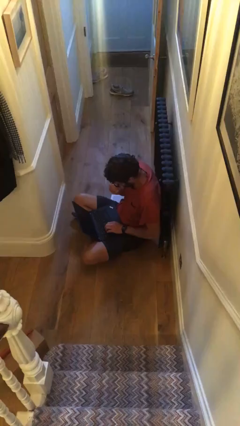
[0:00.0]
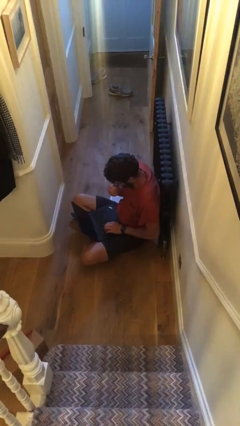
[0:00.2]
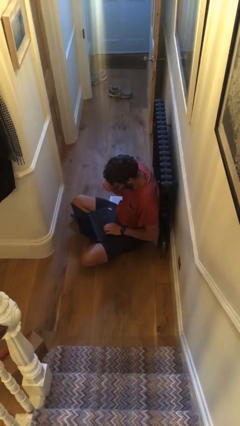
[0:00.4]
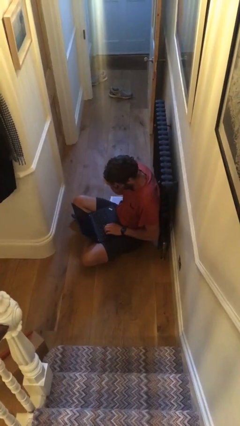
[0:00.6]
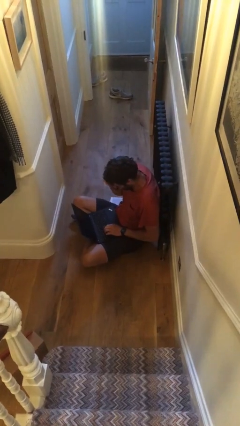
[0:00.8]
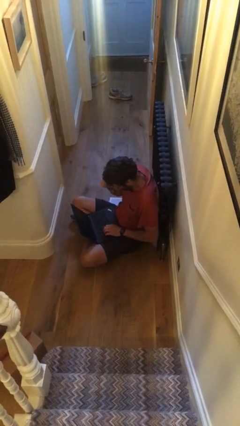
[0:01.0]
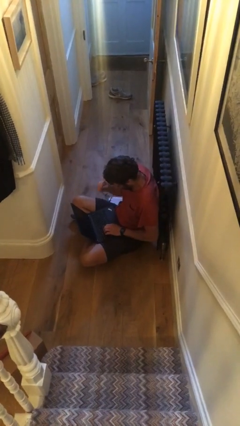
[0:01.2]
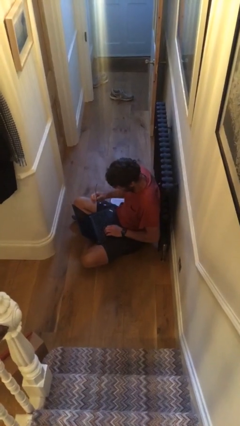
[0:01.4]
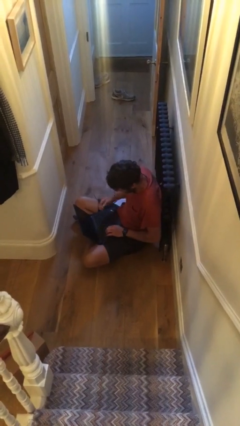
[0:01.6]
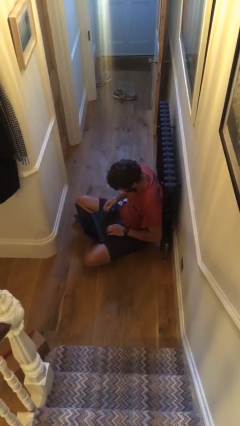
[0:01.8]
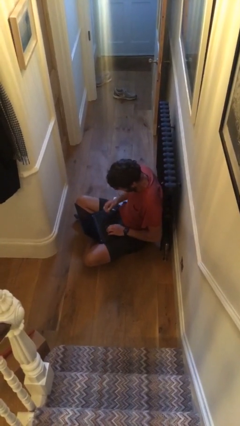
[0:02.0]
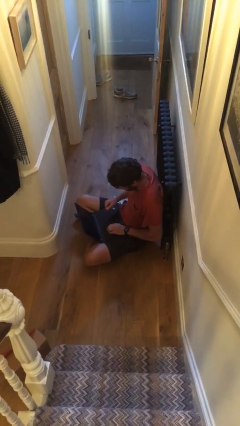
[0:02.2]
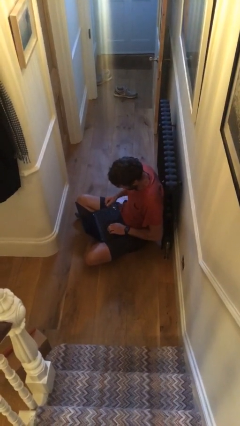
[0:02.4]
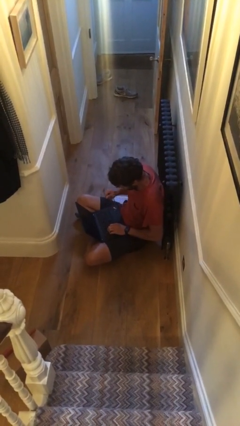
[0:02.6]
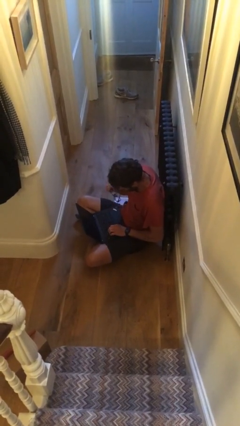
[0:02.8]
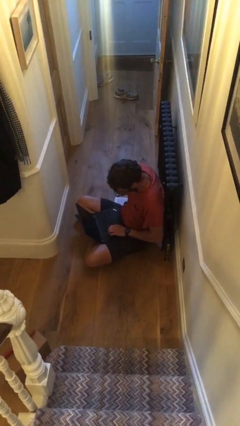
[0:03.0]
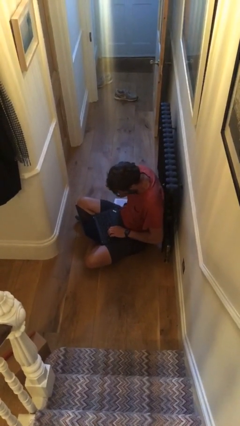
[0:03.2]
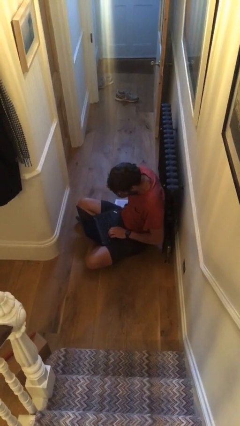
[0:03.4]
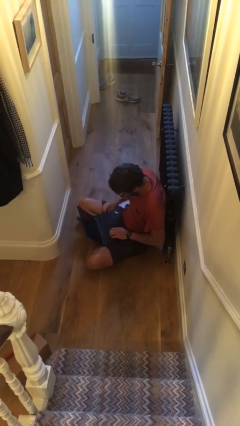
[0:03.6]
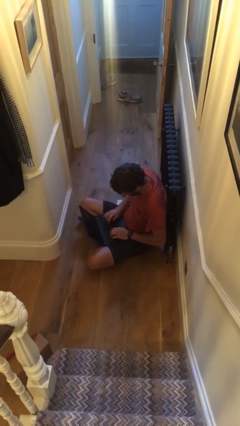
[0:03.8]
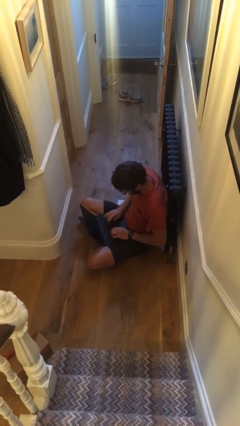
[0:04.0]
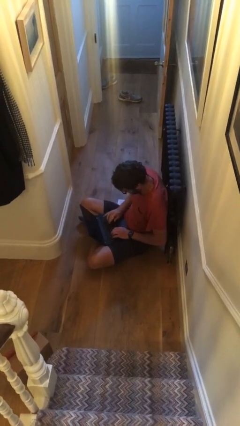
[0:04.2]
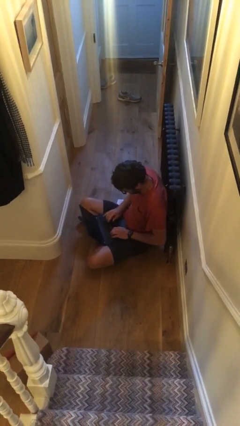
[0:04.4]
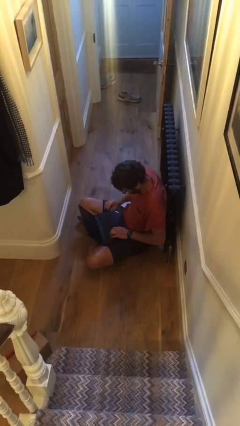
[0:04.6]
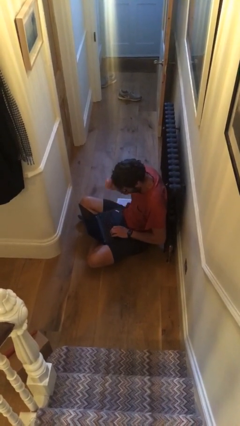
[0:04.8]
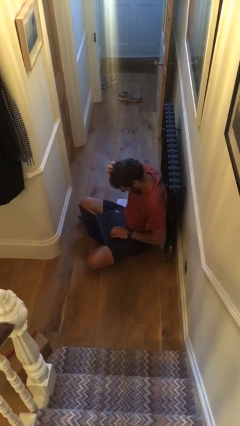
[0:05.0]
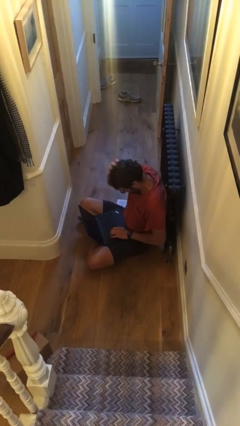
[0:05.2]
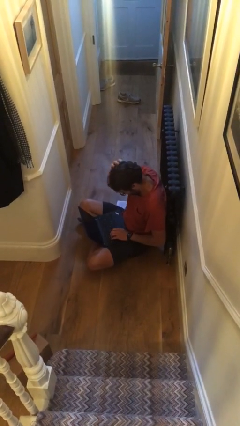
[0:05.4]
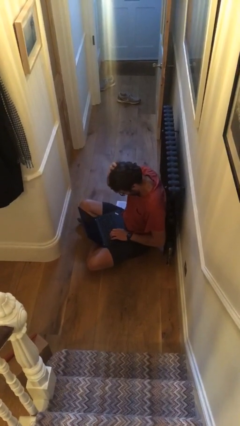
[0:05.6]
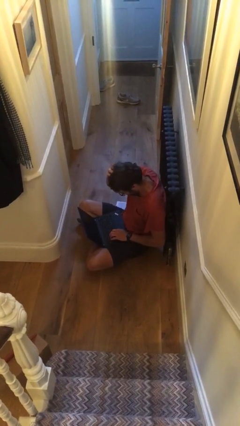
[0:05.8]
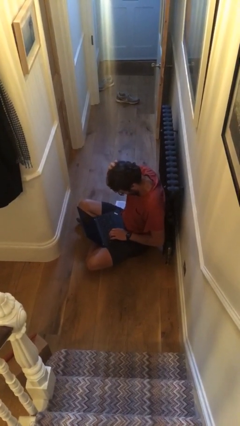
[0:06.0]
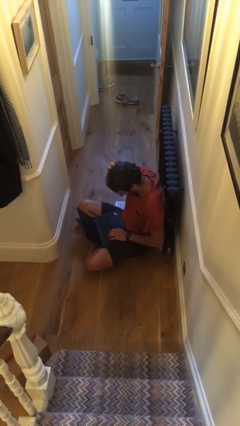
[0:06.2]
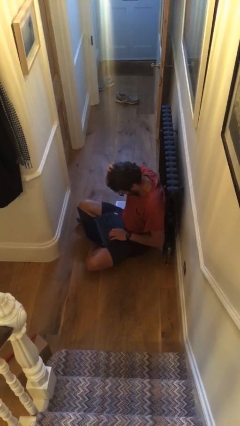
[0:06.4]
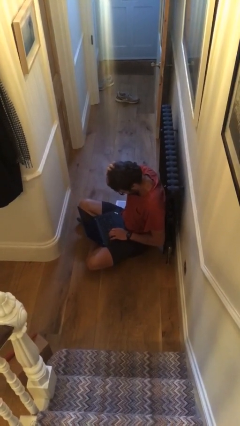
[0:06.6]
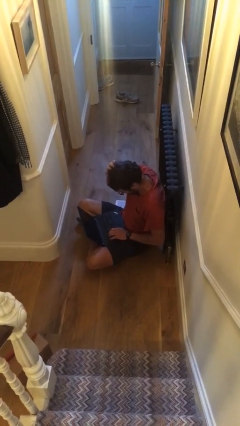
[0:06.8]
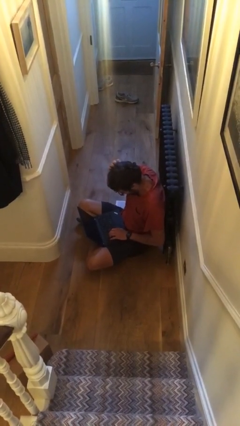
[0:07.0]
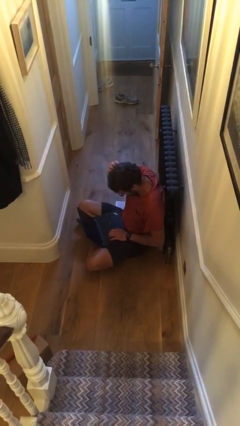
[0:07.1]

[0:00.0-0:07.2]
person interacts with laptop

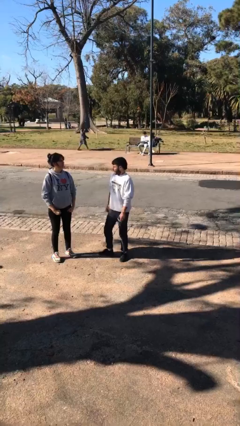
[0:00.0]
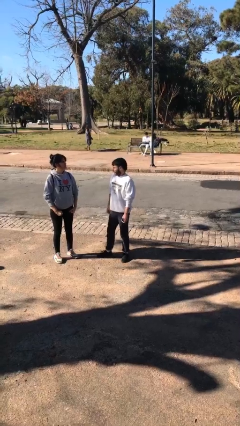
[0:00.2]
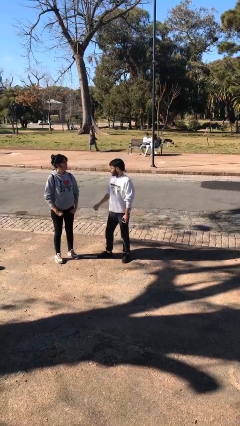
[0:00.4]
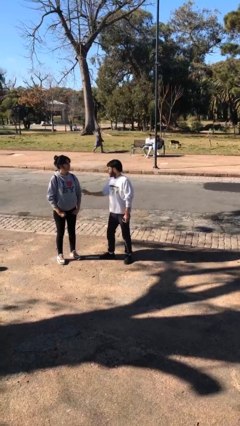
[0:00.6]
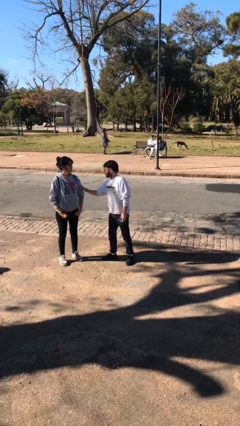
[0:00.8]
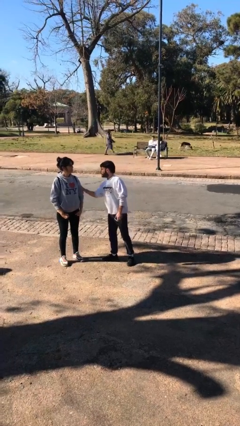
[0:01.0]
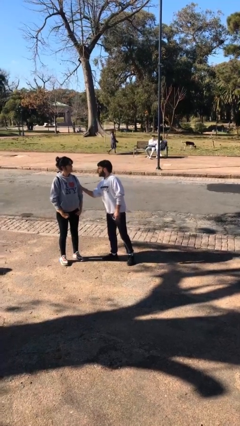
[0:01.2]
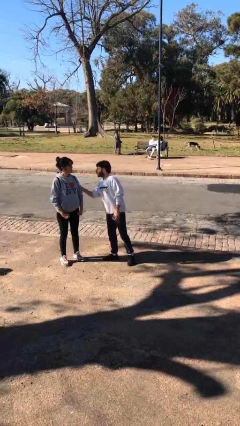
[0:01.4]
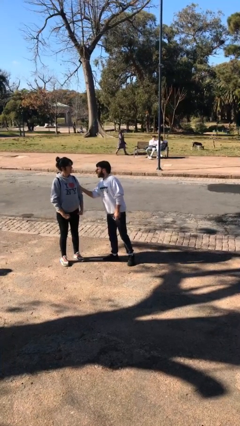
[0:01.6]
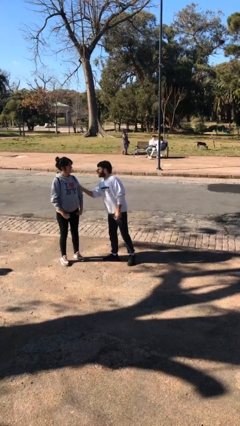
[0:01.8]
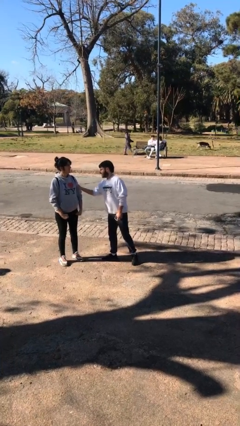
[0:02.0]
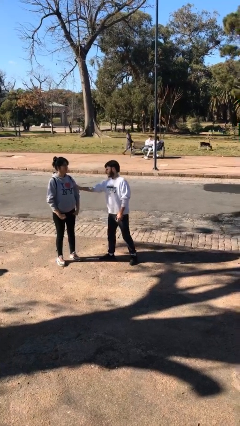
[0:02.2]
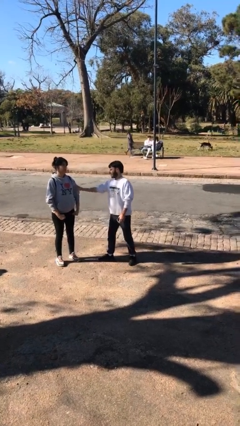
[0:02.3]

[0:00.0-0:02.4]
person grabs person by bicep

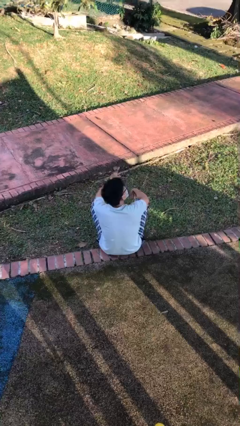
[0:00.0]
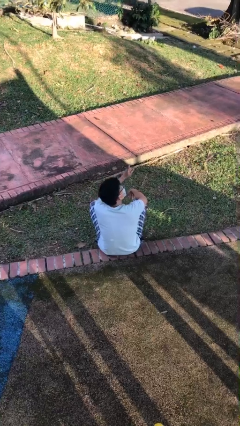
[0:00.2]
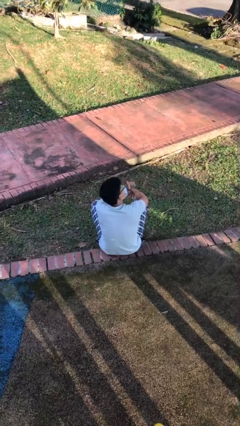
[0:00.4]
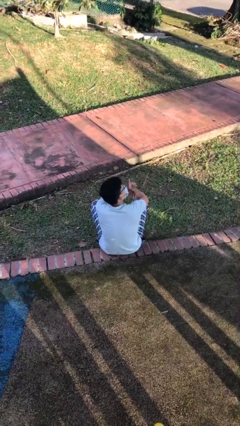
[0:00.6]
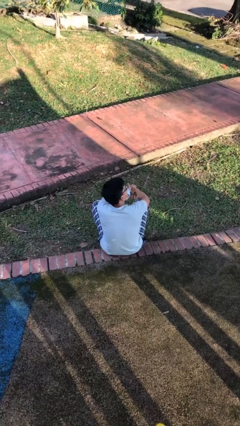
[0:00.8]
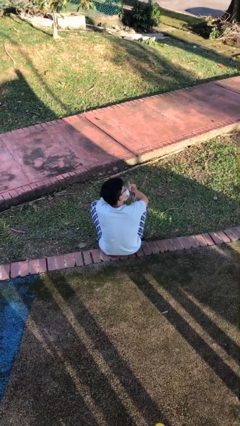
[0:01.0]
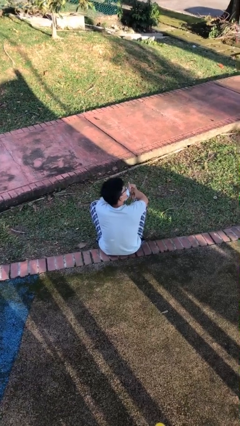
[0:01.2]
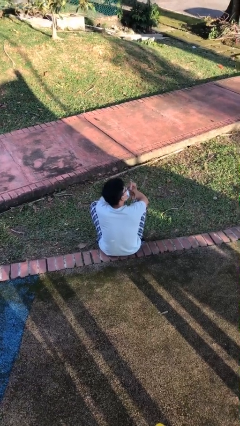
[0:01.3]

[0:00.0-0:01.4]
person gestures be quiet

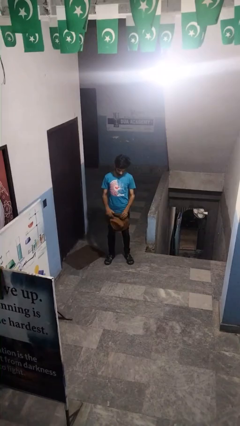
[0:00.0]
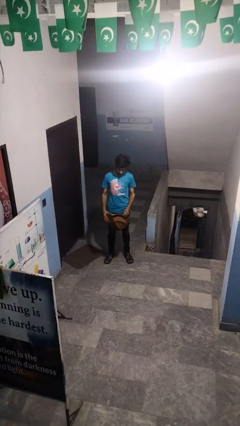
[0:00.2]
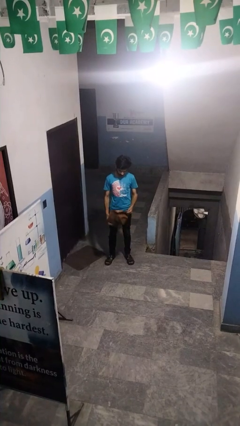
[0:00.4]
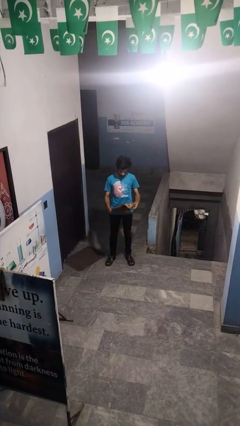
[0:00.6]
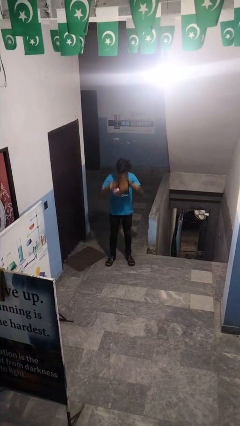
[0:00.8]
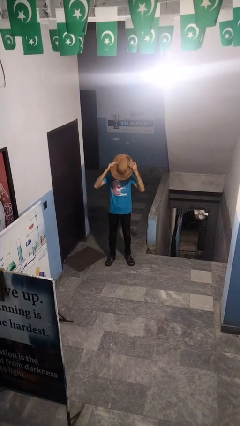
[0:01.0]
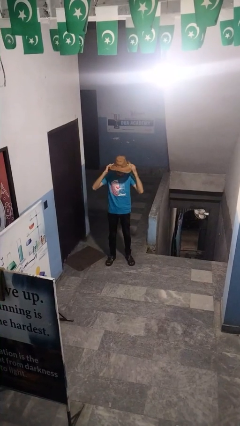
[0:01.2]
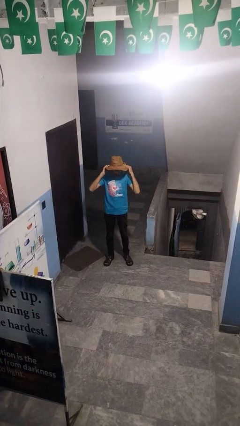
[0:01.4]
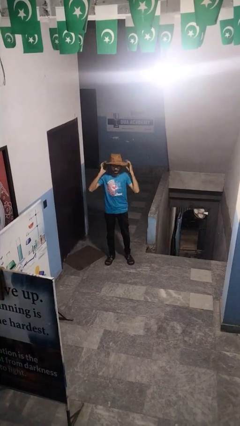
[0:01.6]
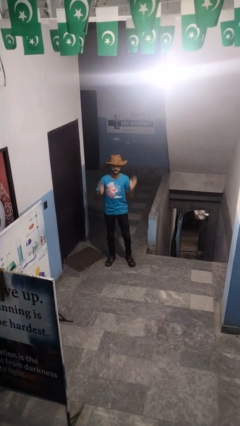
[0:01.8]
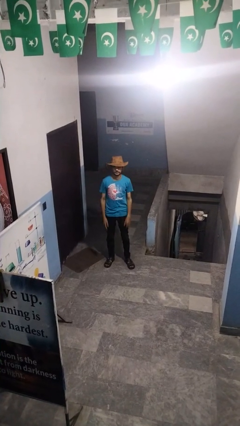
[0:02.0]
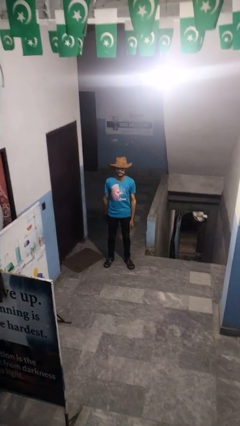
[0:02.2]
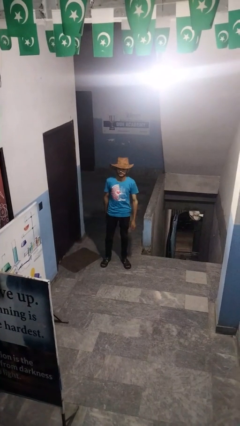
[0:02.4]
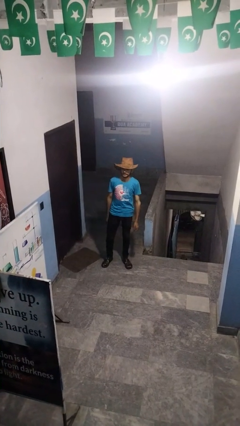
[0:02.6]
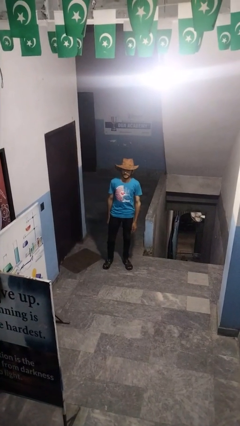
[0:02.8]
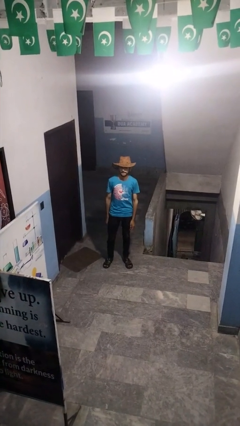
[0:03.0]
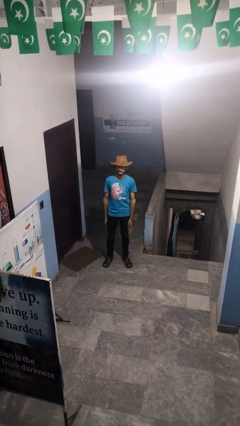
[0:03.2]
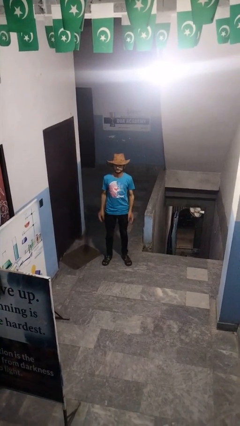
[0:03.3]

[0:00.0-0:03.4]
person puts on hat

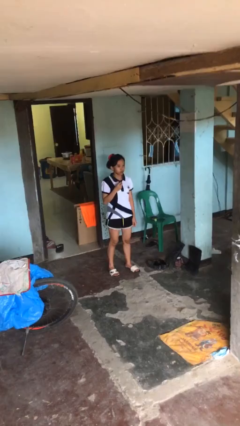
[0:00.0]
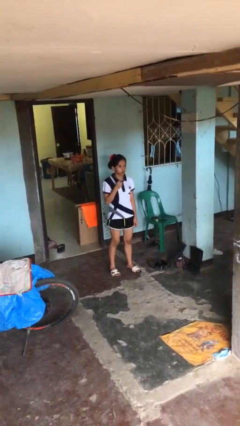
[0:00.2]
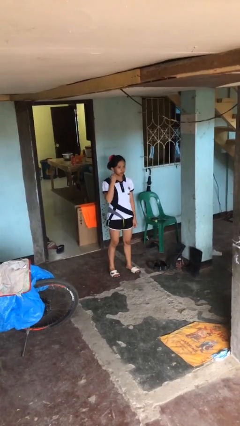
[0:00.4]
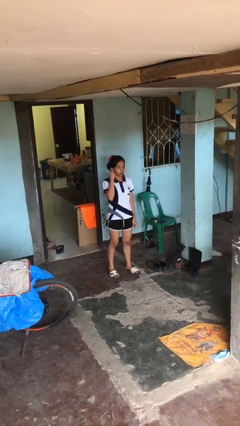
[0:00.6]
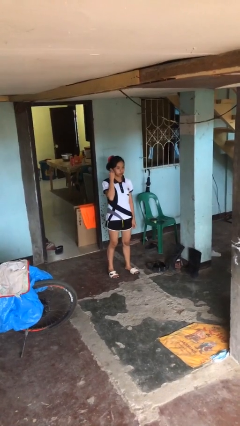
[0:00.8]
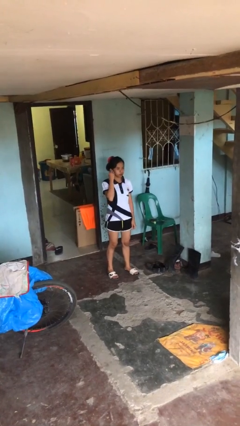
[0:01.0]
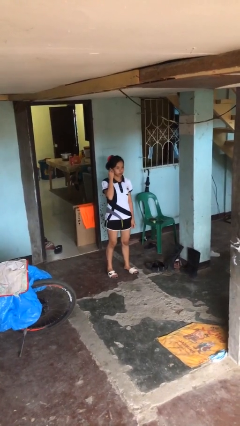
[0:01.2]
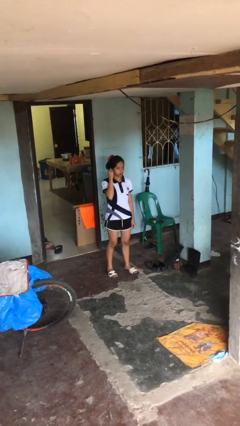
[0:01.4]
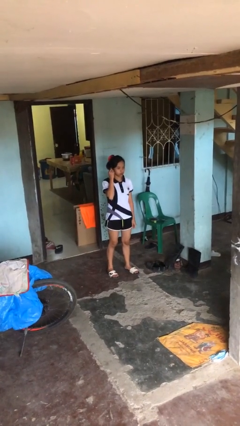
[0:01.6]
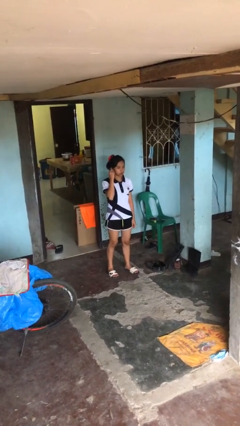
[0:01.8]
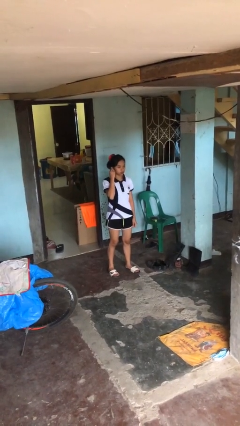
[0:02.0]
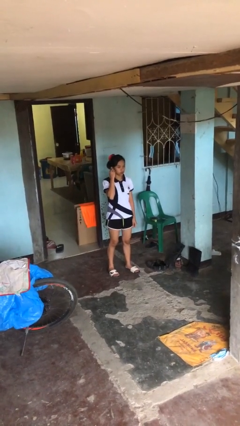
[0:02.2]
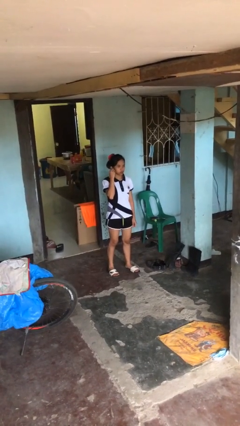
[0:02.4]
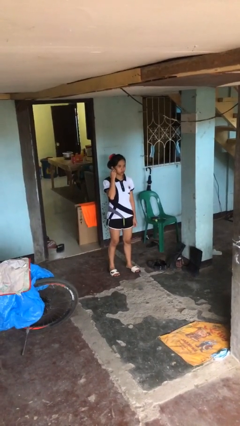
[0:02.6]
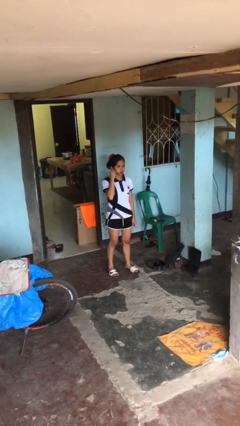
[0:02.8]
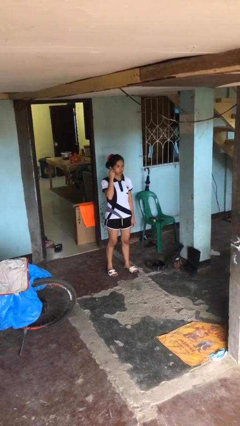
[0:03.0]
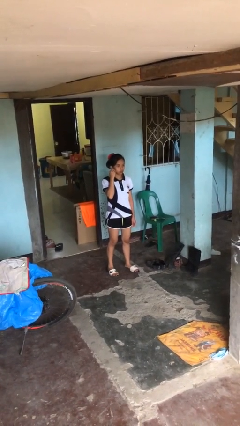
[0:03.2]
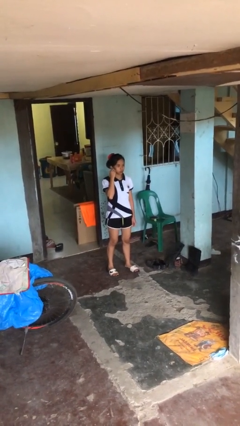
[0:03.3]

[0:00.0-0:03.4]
person puts on earrings

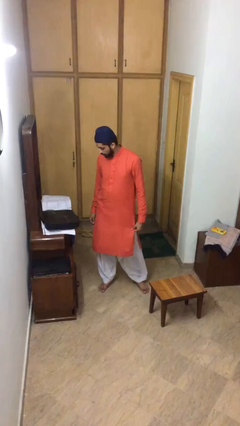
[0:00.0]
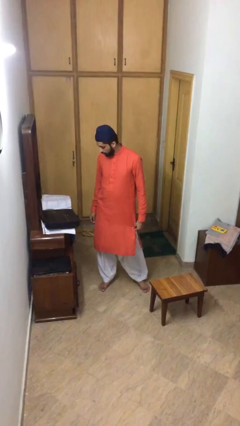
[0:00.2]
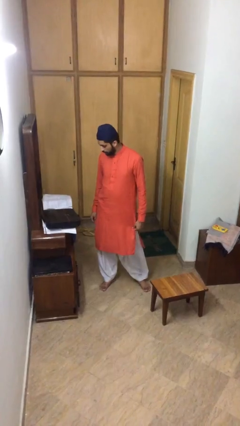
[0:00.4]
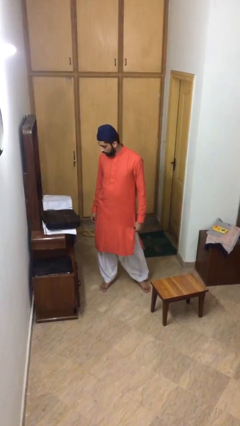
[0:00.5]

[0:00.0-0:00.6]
person picks up object from table
